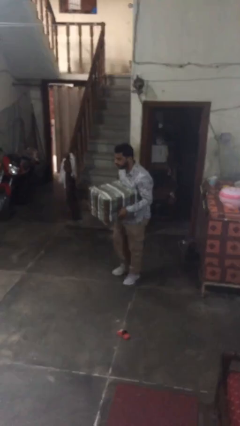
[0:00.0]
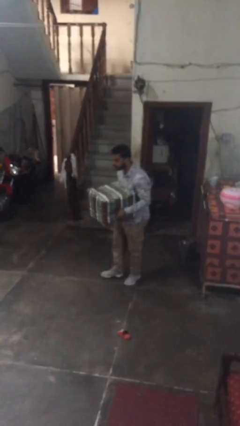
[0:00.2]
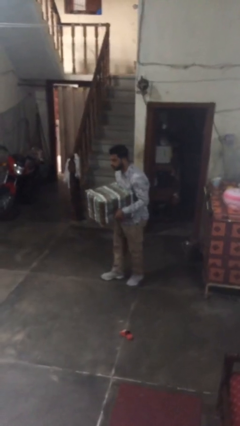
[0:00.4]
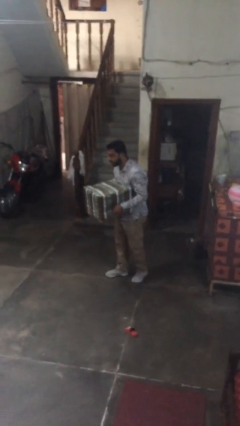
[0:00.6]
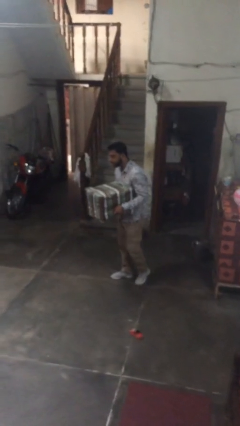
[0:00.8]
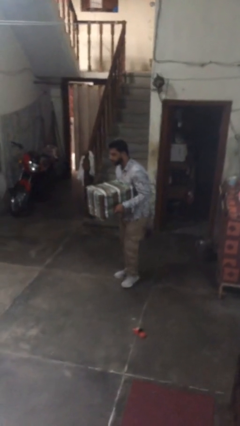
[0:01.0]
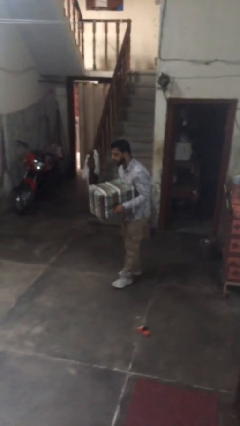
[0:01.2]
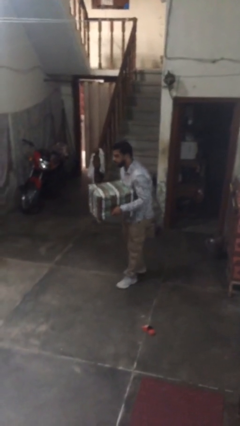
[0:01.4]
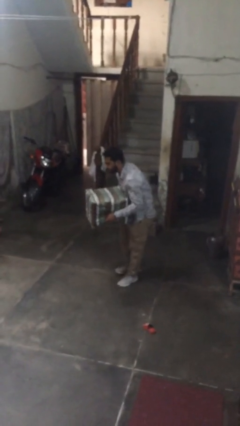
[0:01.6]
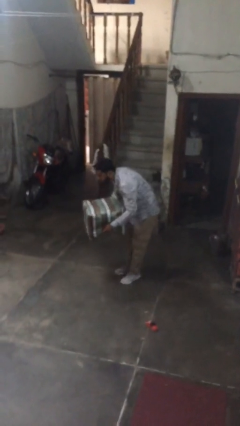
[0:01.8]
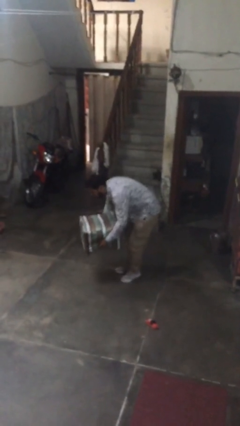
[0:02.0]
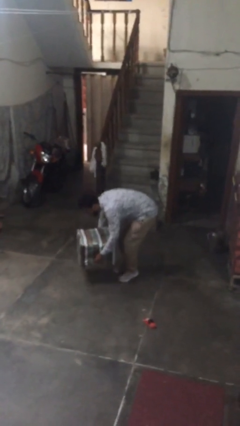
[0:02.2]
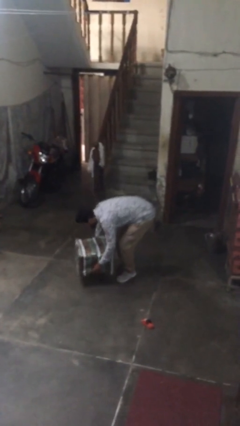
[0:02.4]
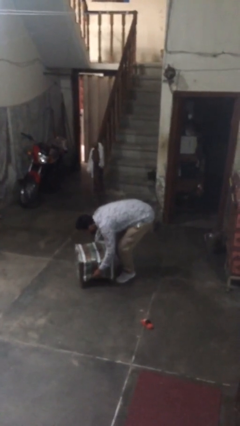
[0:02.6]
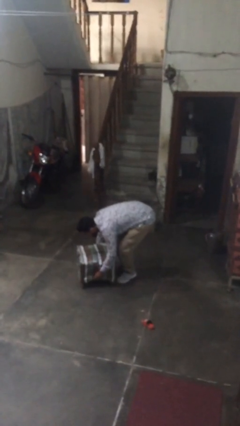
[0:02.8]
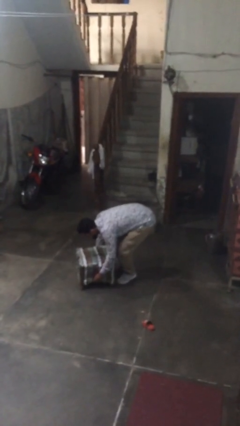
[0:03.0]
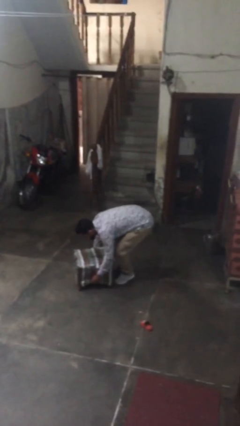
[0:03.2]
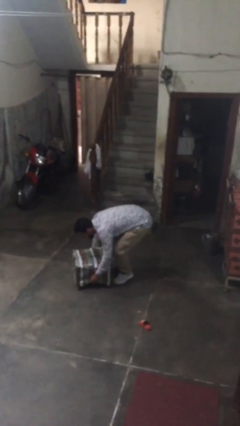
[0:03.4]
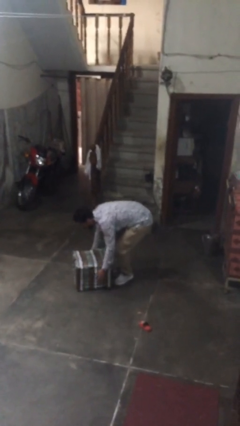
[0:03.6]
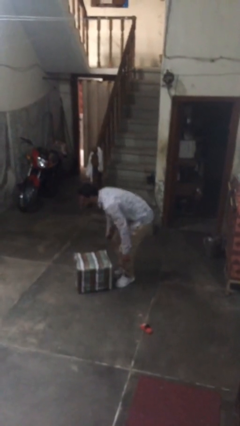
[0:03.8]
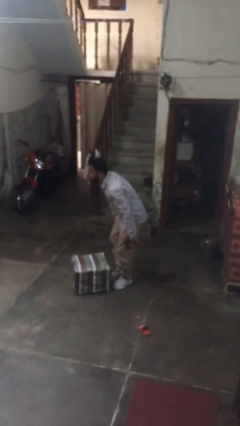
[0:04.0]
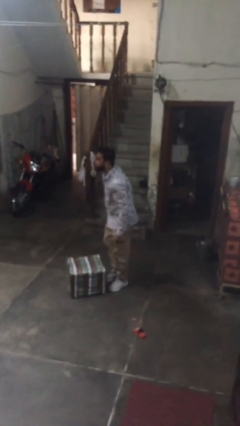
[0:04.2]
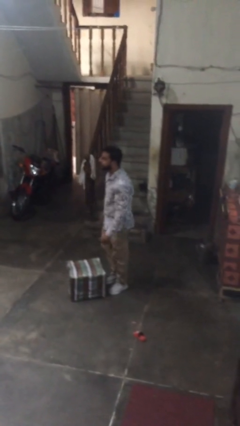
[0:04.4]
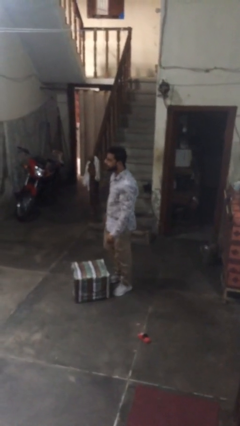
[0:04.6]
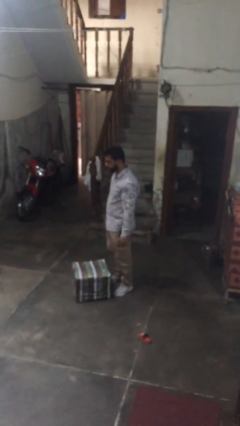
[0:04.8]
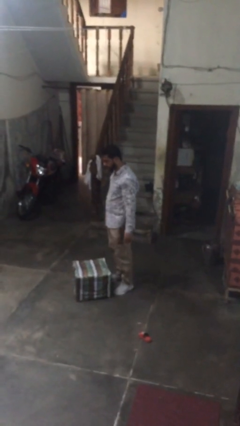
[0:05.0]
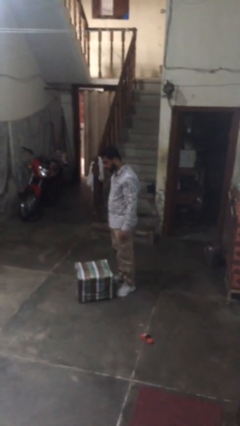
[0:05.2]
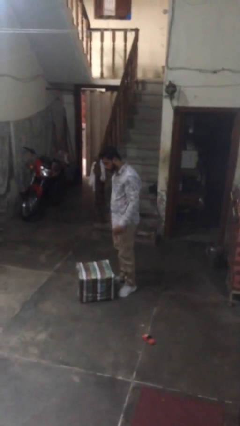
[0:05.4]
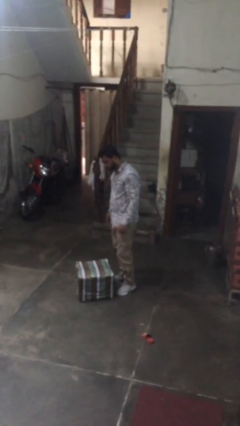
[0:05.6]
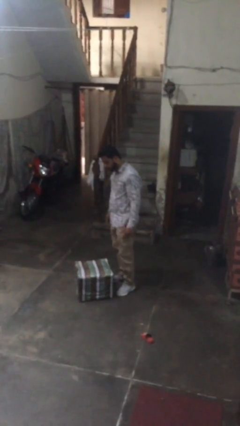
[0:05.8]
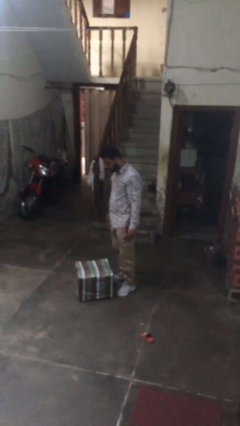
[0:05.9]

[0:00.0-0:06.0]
person puts down object on floor

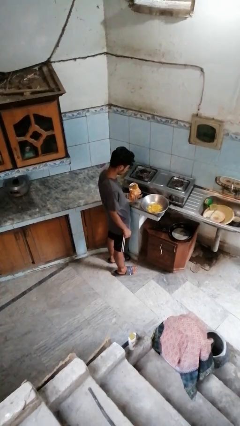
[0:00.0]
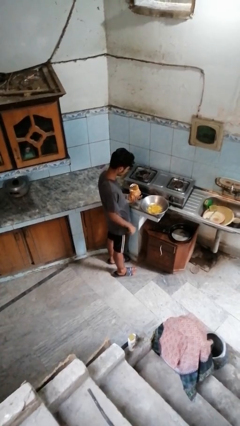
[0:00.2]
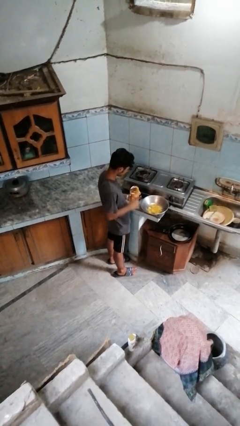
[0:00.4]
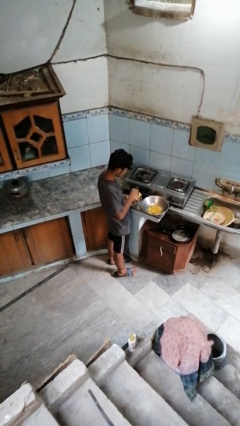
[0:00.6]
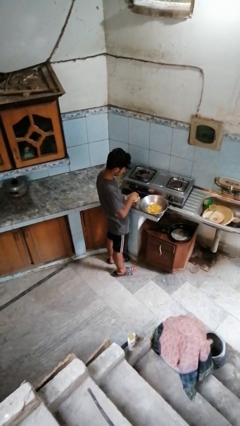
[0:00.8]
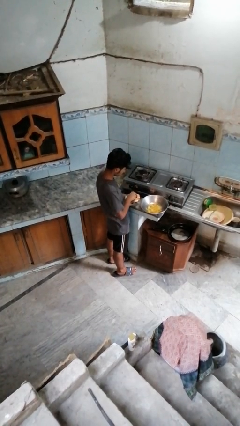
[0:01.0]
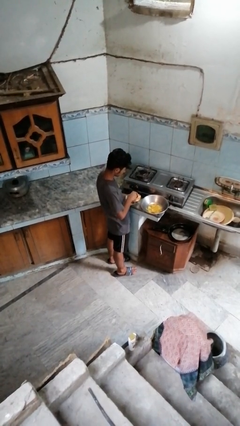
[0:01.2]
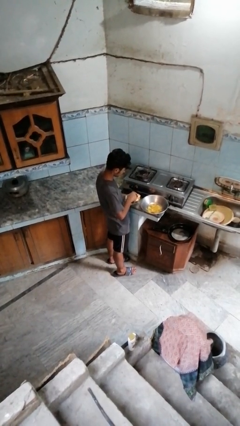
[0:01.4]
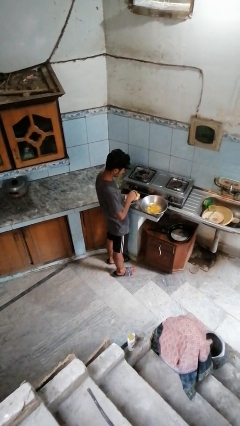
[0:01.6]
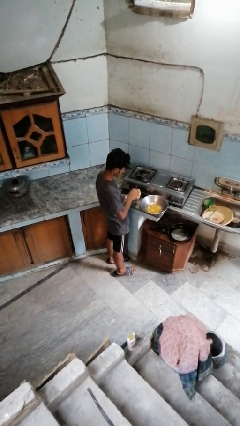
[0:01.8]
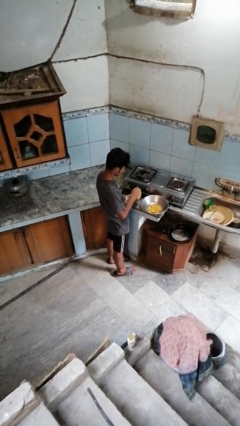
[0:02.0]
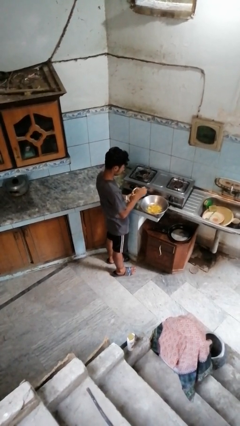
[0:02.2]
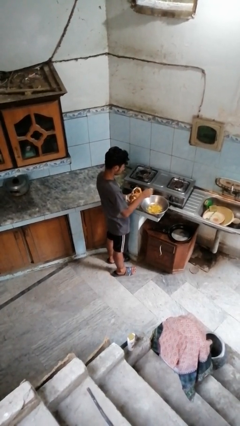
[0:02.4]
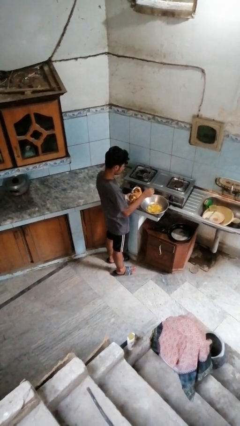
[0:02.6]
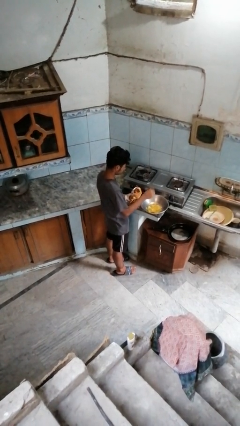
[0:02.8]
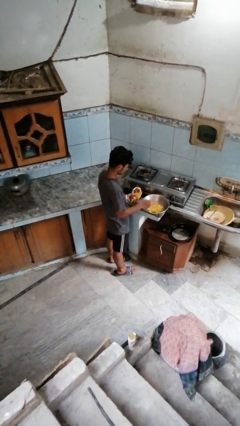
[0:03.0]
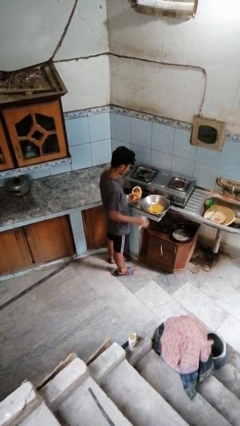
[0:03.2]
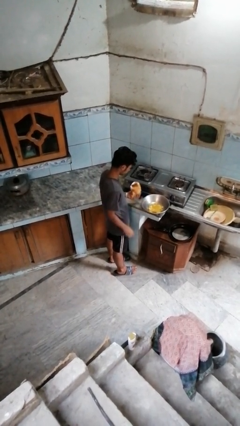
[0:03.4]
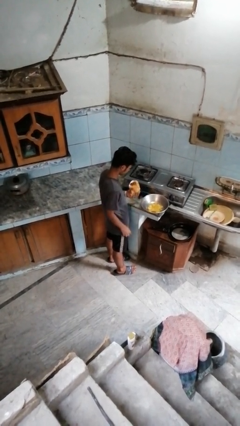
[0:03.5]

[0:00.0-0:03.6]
person pours into bowl

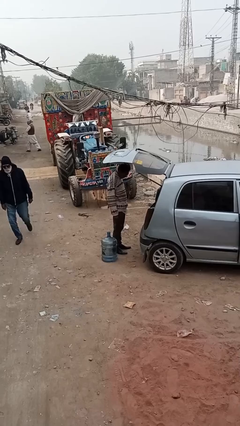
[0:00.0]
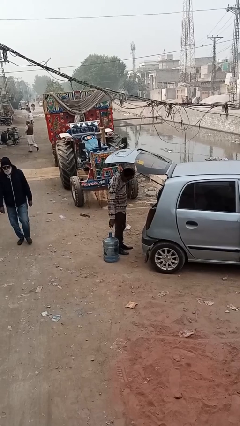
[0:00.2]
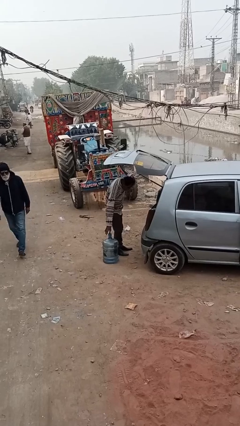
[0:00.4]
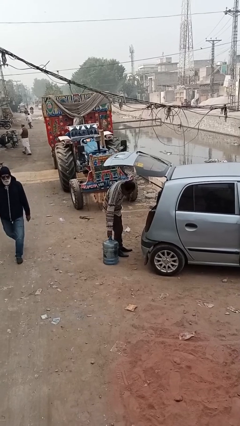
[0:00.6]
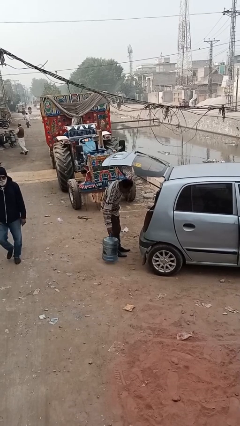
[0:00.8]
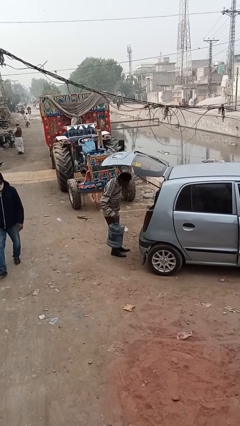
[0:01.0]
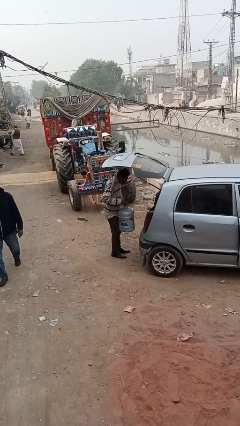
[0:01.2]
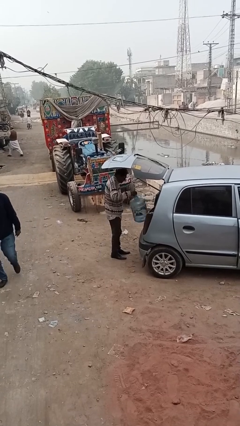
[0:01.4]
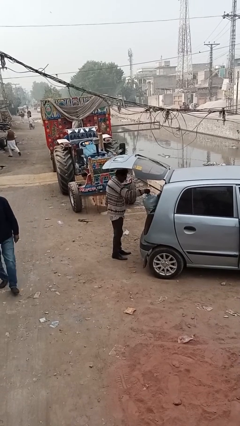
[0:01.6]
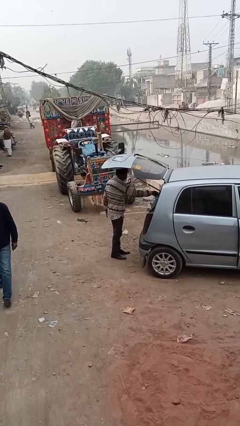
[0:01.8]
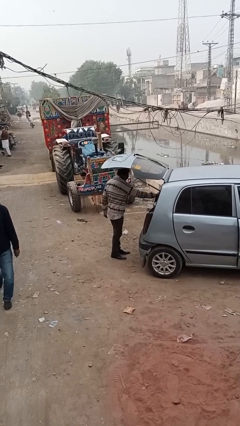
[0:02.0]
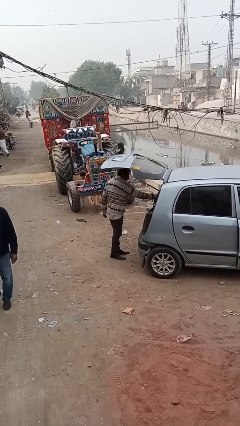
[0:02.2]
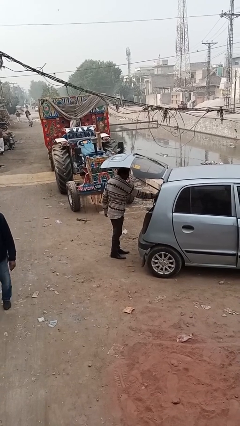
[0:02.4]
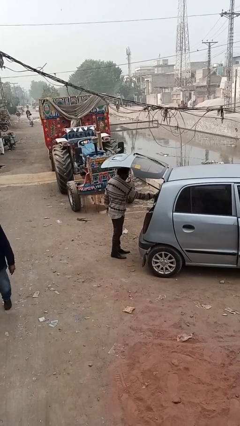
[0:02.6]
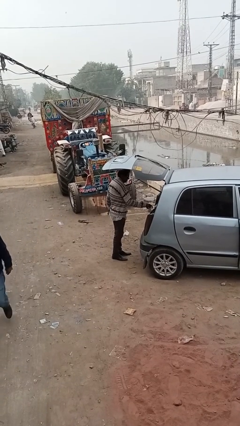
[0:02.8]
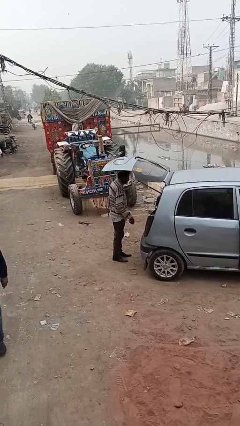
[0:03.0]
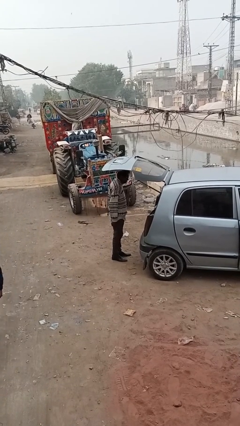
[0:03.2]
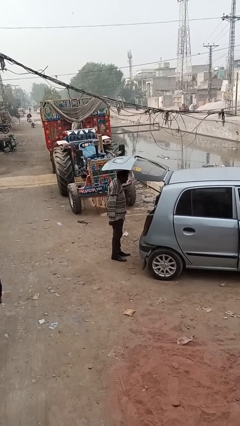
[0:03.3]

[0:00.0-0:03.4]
person loads car

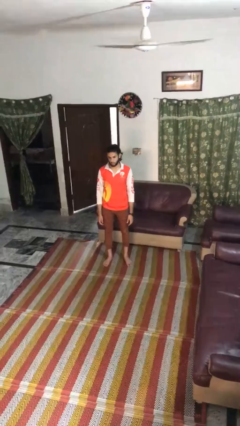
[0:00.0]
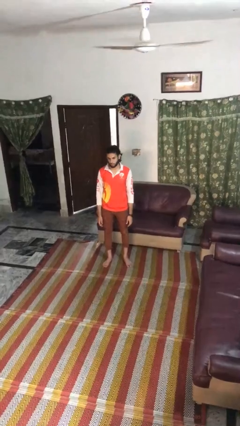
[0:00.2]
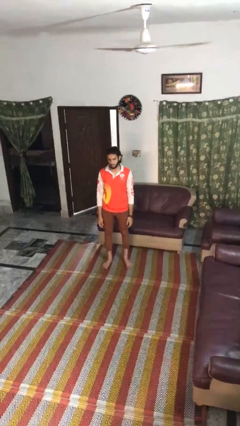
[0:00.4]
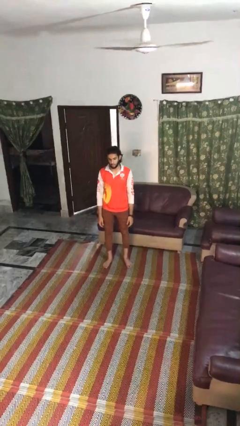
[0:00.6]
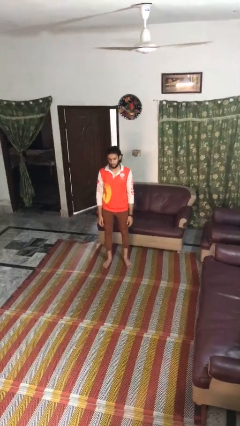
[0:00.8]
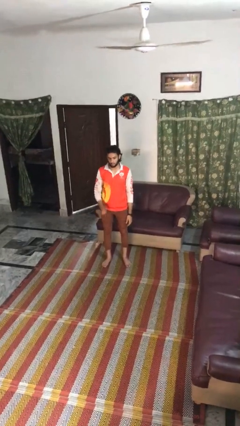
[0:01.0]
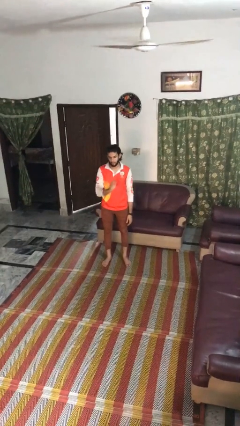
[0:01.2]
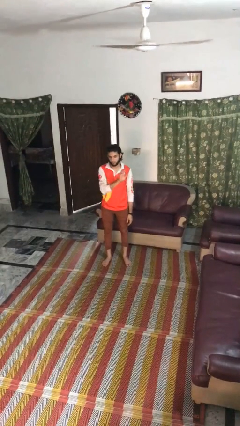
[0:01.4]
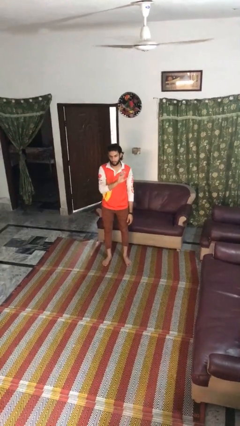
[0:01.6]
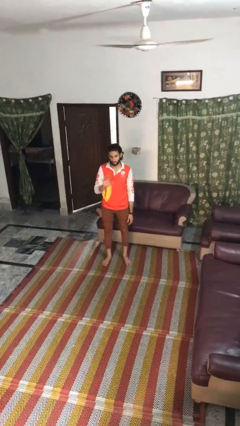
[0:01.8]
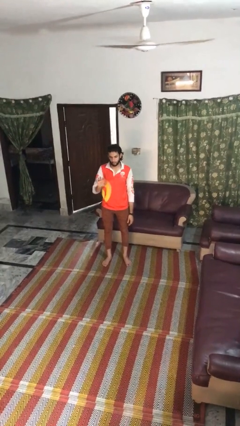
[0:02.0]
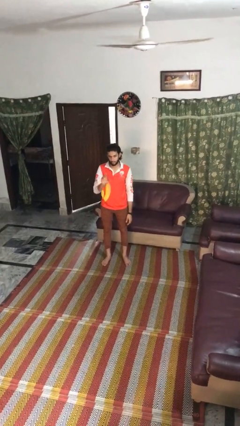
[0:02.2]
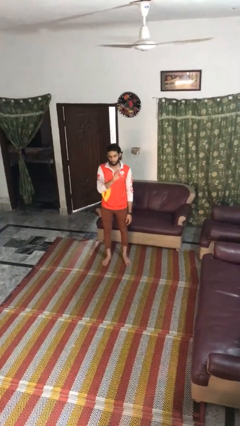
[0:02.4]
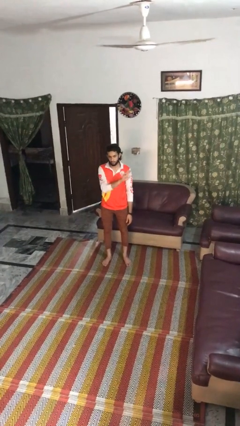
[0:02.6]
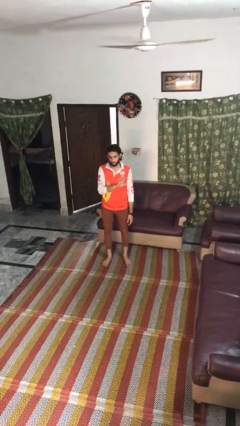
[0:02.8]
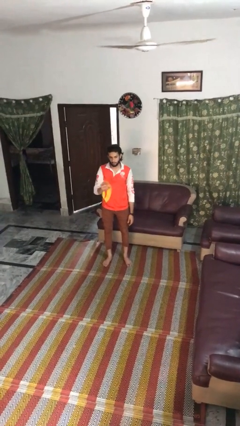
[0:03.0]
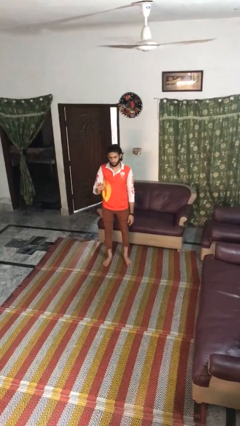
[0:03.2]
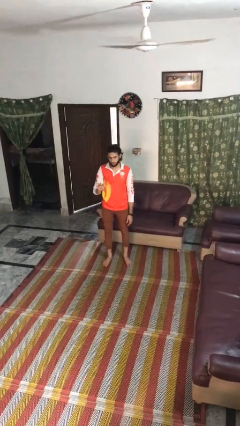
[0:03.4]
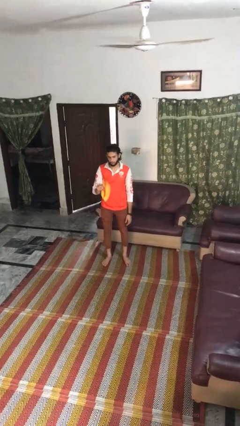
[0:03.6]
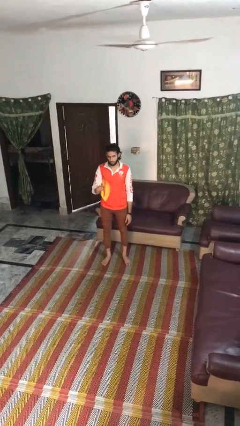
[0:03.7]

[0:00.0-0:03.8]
person gestures swipe right

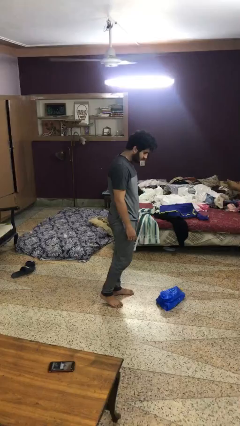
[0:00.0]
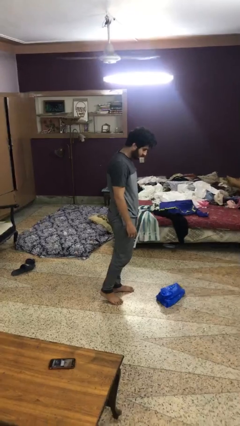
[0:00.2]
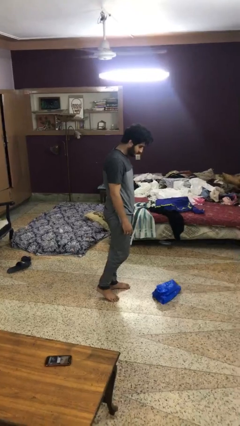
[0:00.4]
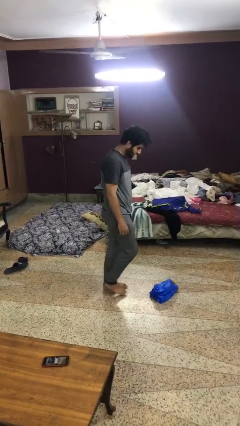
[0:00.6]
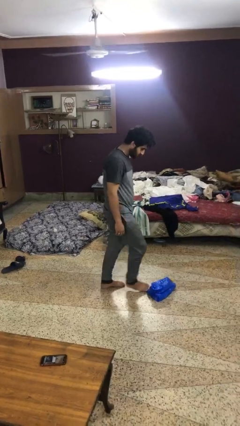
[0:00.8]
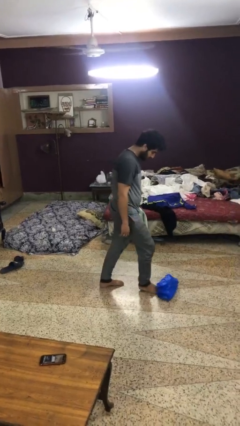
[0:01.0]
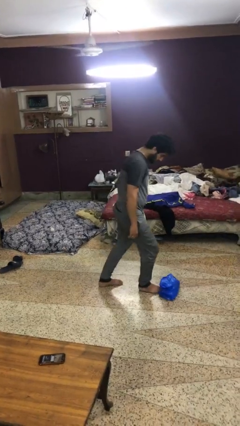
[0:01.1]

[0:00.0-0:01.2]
person trips on object on floor
